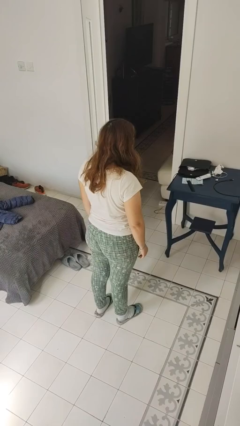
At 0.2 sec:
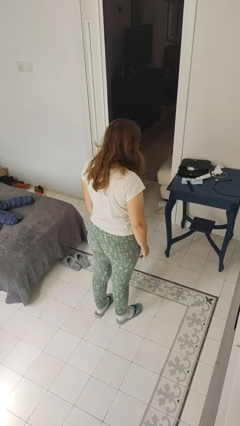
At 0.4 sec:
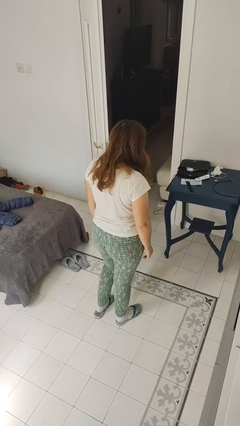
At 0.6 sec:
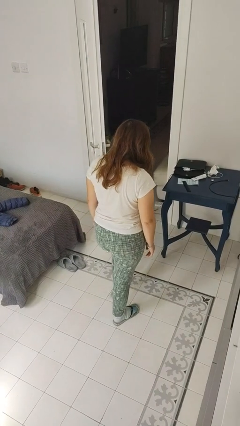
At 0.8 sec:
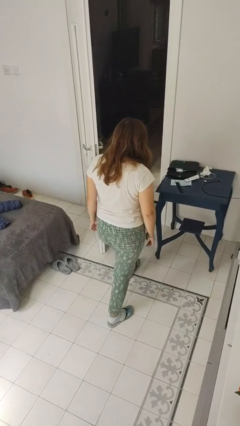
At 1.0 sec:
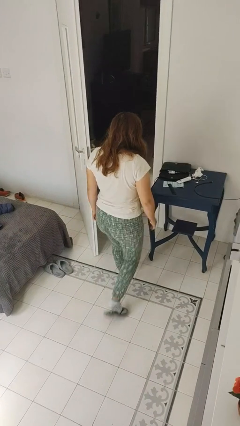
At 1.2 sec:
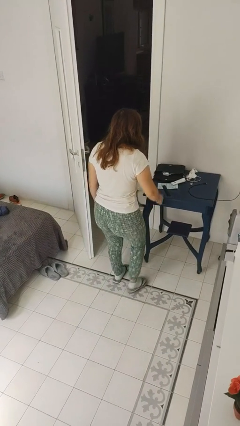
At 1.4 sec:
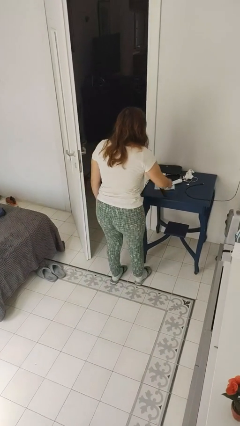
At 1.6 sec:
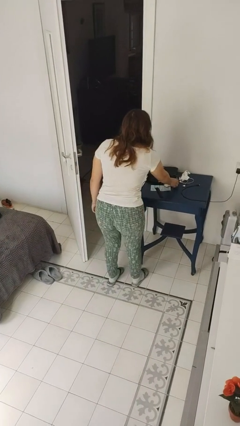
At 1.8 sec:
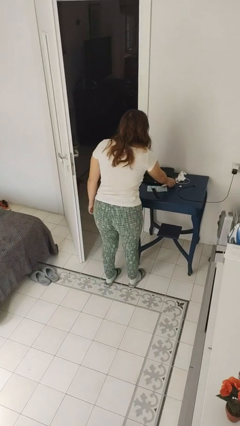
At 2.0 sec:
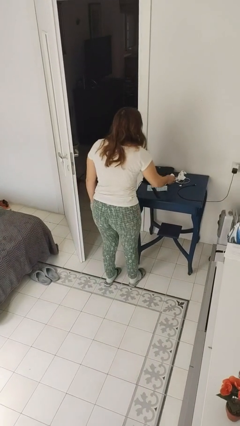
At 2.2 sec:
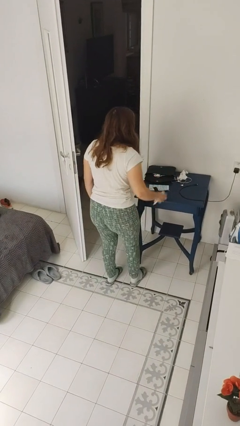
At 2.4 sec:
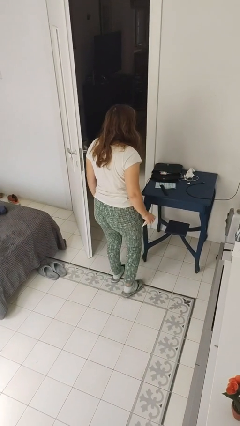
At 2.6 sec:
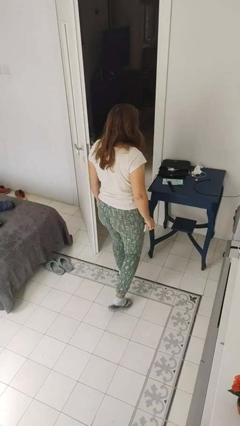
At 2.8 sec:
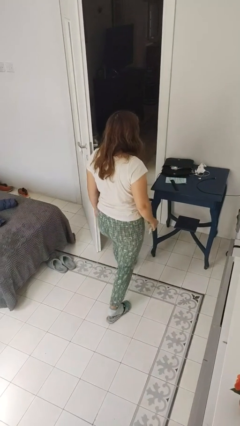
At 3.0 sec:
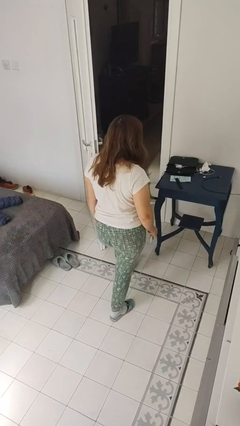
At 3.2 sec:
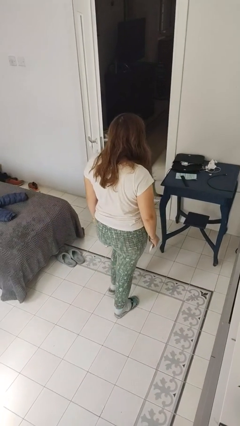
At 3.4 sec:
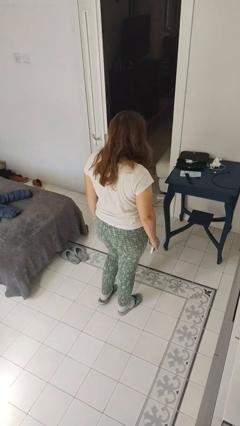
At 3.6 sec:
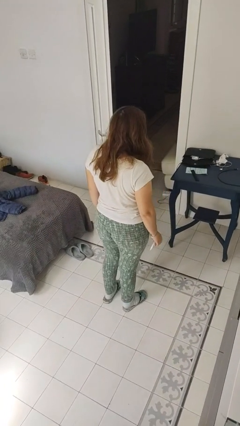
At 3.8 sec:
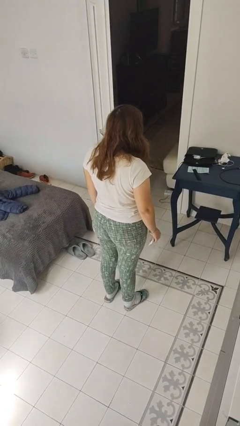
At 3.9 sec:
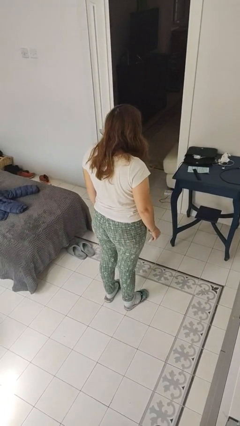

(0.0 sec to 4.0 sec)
person picks up object from table

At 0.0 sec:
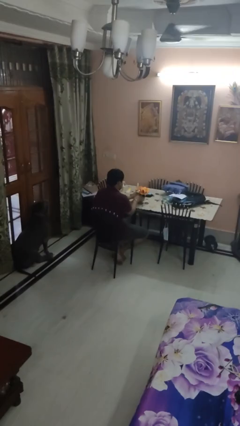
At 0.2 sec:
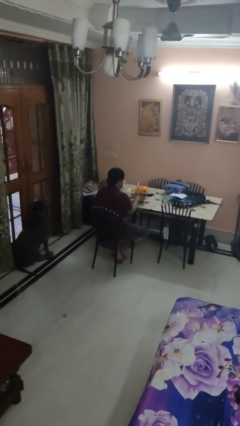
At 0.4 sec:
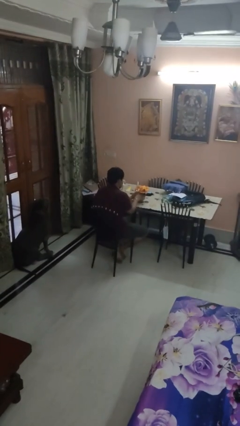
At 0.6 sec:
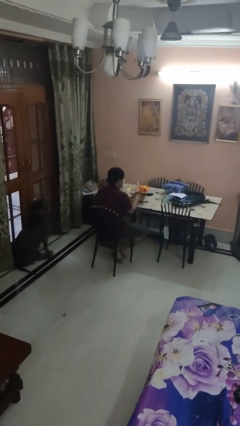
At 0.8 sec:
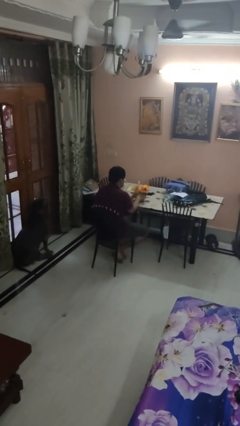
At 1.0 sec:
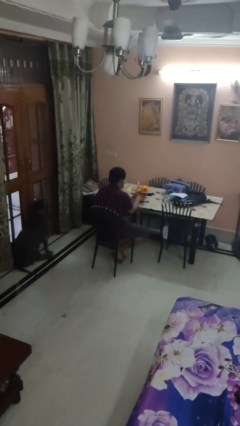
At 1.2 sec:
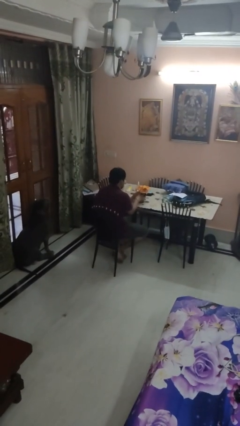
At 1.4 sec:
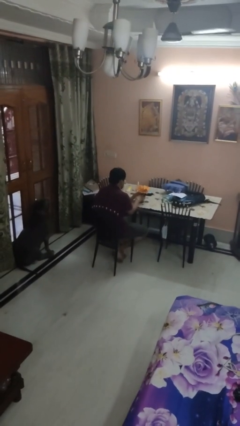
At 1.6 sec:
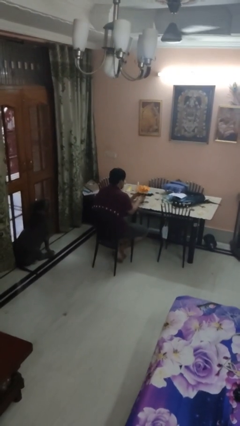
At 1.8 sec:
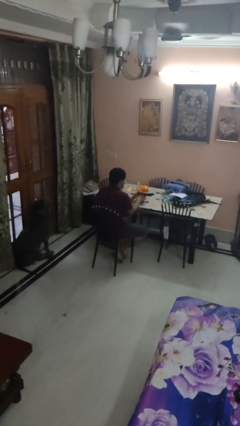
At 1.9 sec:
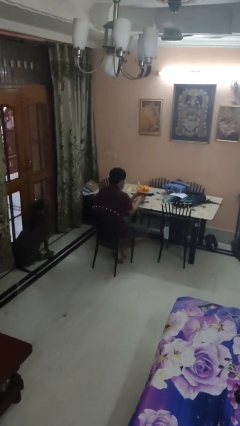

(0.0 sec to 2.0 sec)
person arranges flowers in vase

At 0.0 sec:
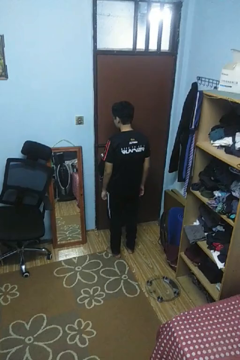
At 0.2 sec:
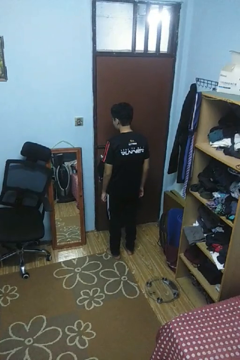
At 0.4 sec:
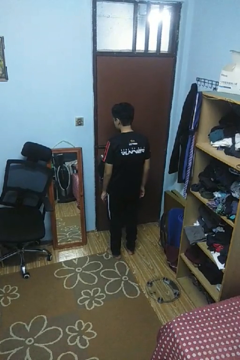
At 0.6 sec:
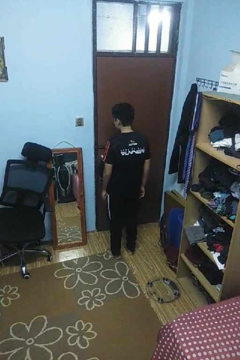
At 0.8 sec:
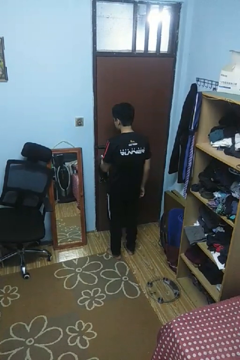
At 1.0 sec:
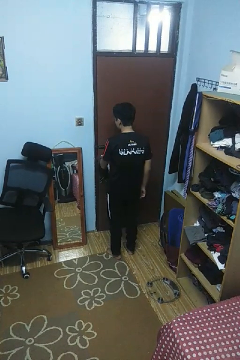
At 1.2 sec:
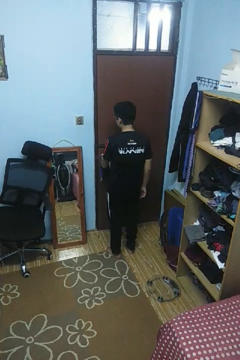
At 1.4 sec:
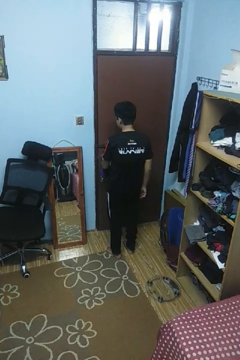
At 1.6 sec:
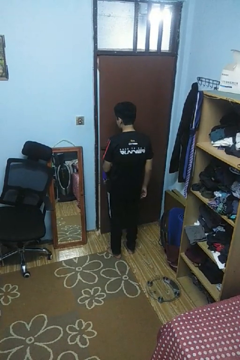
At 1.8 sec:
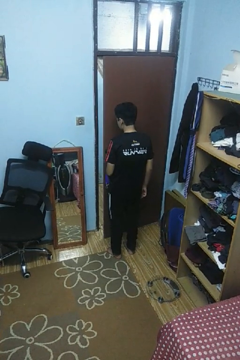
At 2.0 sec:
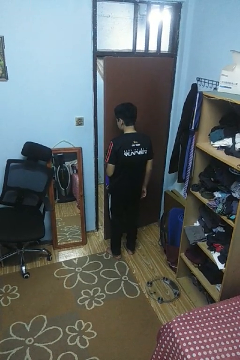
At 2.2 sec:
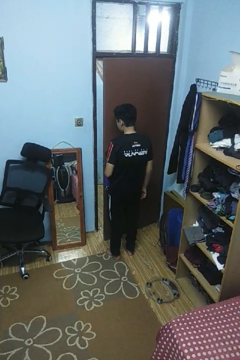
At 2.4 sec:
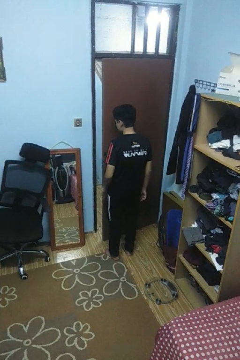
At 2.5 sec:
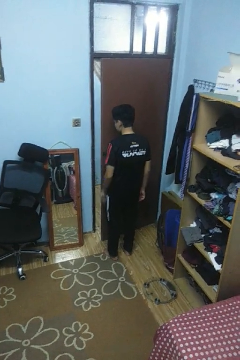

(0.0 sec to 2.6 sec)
person opens facility door

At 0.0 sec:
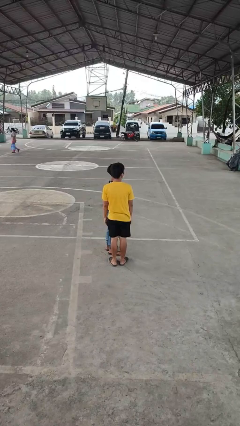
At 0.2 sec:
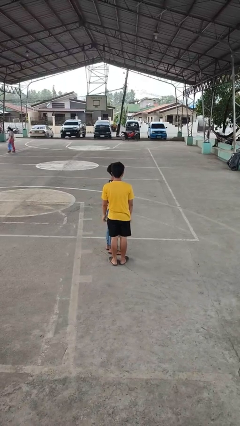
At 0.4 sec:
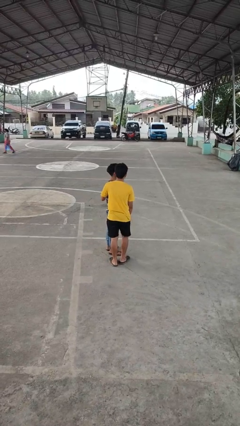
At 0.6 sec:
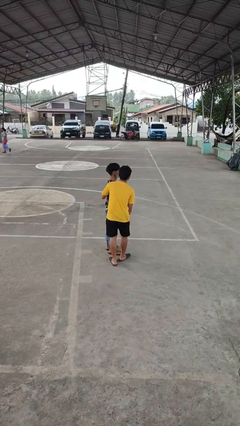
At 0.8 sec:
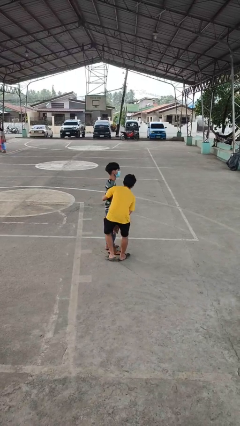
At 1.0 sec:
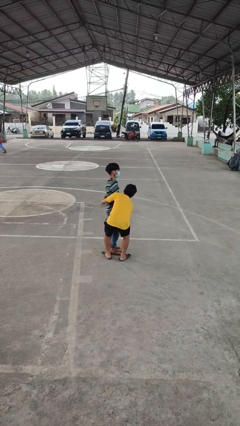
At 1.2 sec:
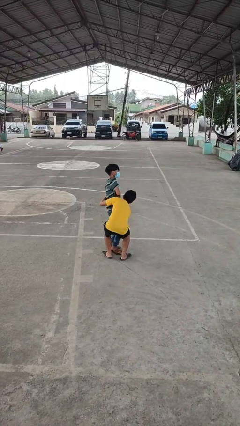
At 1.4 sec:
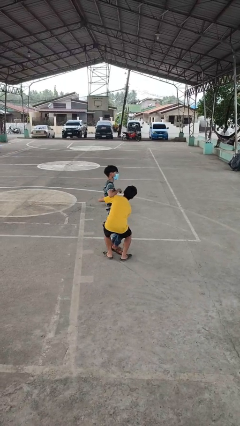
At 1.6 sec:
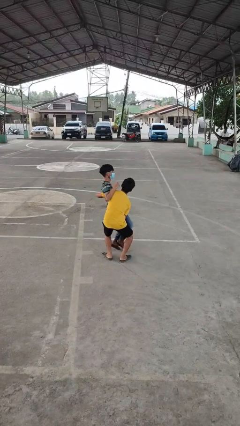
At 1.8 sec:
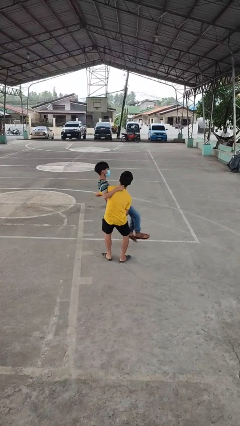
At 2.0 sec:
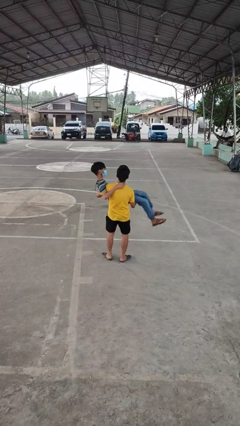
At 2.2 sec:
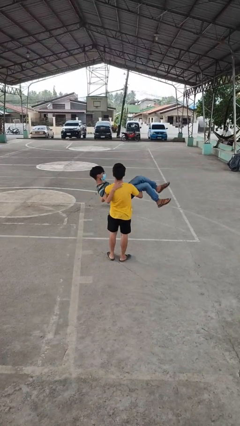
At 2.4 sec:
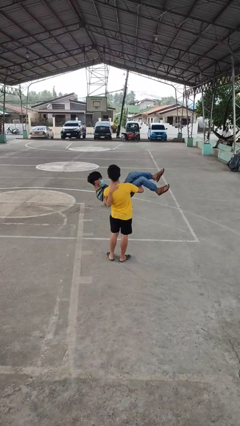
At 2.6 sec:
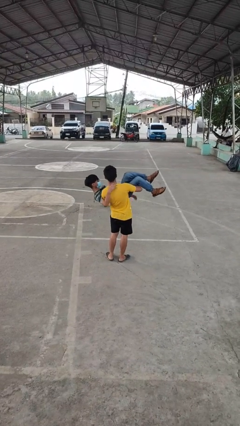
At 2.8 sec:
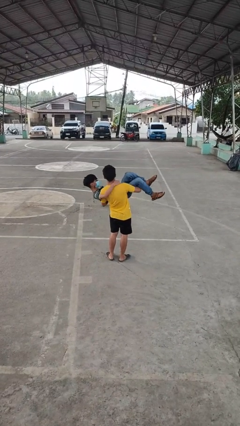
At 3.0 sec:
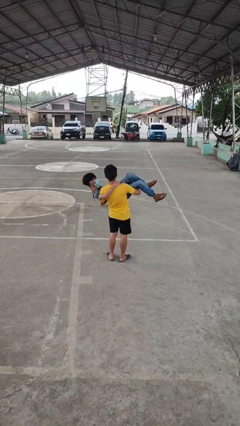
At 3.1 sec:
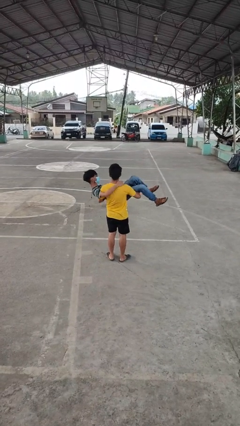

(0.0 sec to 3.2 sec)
person picks up person

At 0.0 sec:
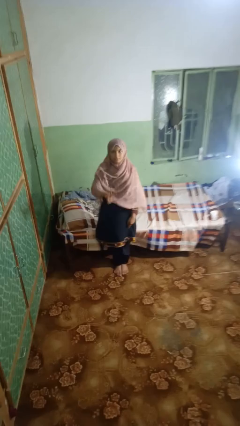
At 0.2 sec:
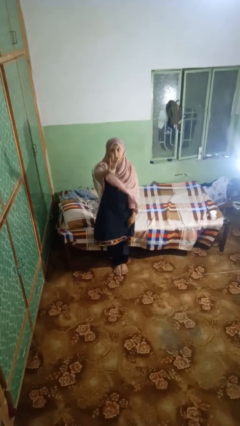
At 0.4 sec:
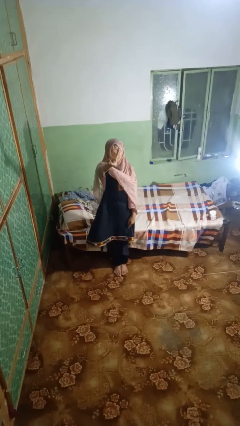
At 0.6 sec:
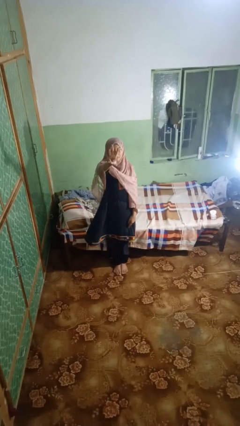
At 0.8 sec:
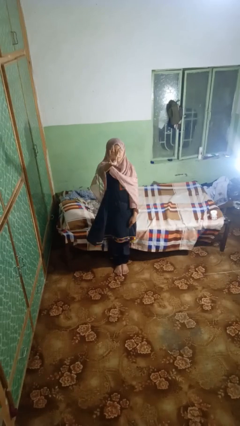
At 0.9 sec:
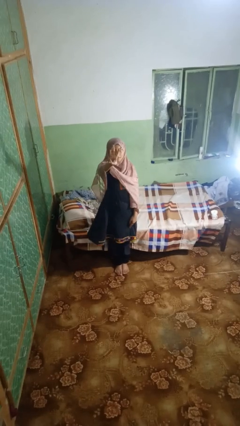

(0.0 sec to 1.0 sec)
person gestures number three

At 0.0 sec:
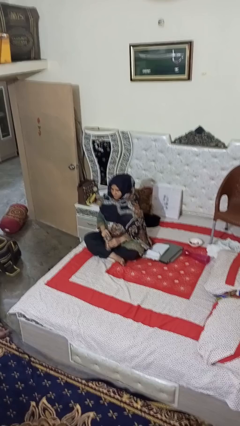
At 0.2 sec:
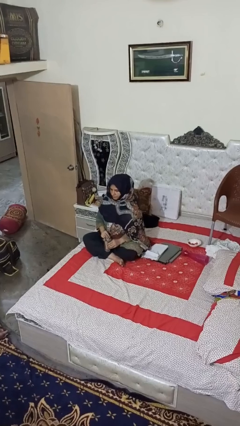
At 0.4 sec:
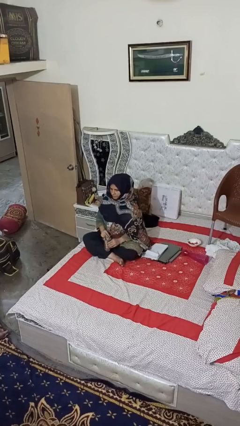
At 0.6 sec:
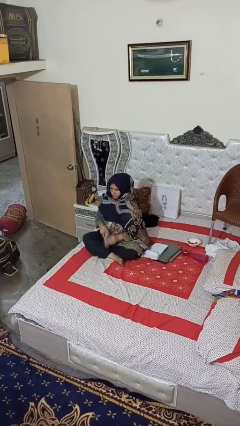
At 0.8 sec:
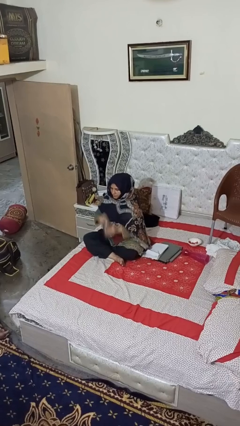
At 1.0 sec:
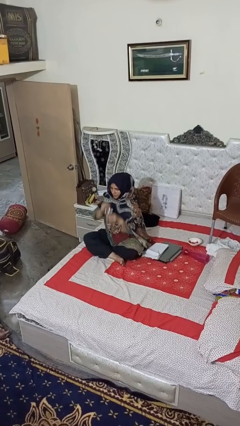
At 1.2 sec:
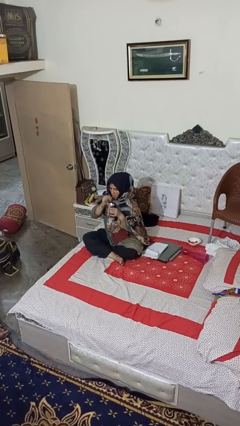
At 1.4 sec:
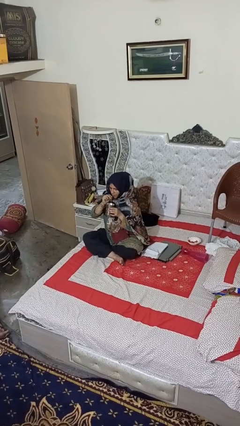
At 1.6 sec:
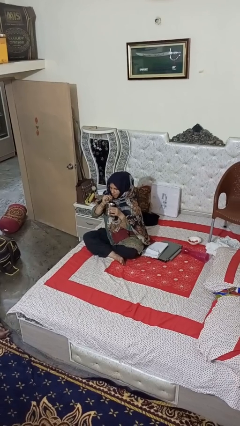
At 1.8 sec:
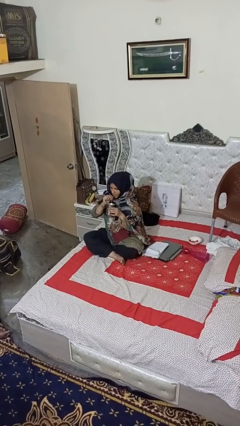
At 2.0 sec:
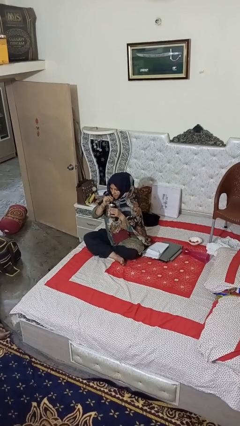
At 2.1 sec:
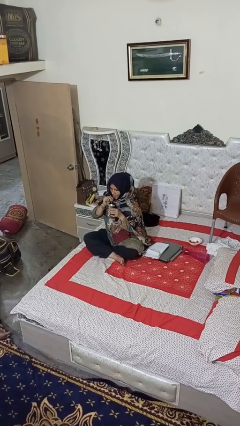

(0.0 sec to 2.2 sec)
person drinks from straw

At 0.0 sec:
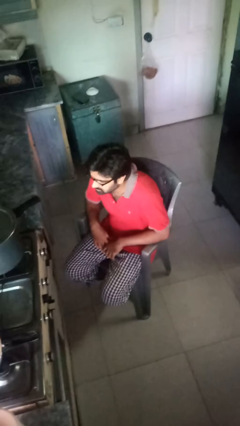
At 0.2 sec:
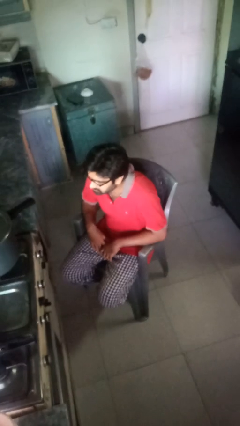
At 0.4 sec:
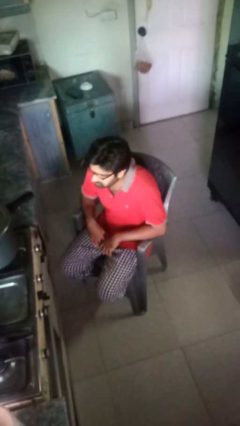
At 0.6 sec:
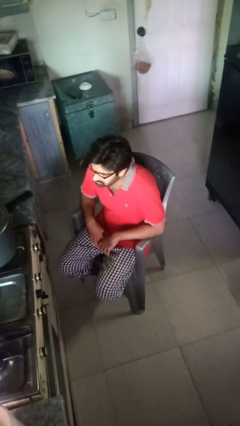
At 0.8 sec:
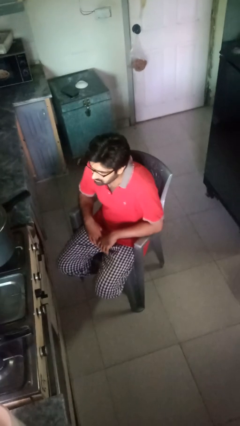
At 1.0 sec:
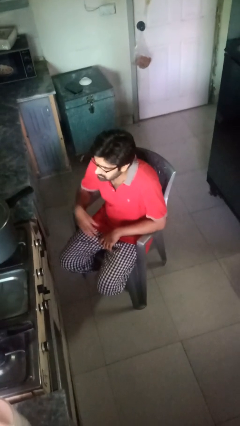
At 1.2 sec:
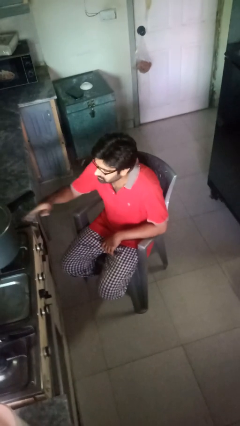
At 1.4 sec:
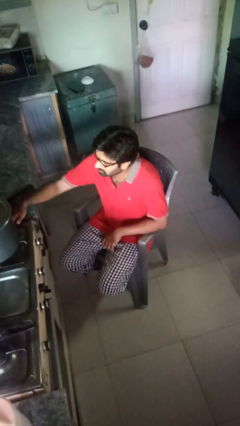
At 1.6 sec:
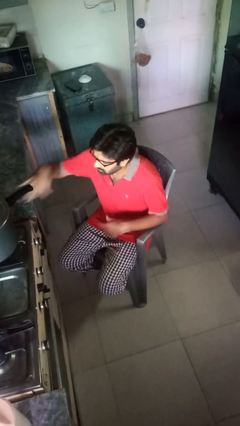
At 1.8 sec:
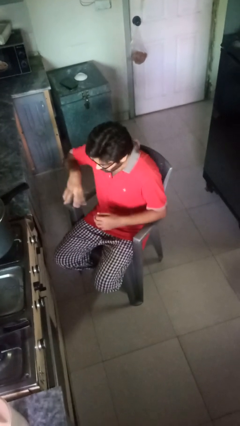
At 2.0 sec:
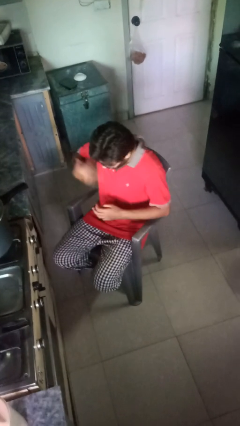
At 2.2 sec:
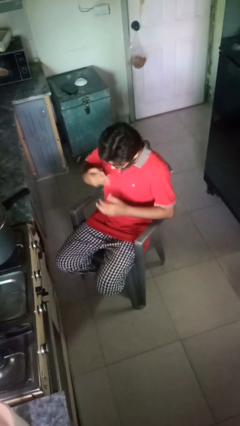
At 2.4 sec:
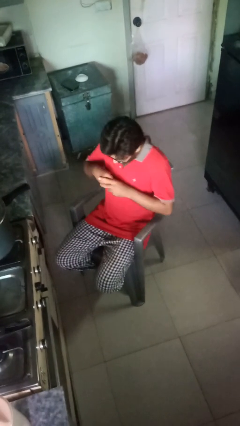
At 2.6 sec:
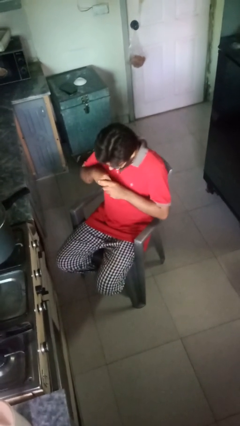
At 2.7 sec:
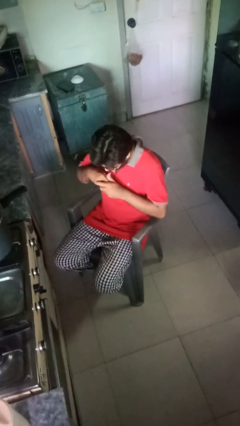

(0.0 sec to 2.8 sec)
person burns hand
